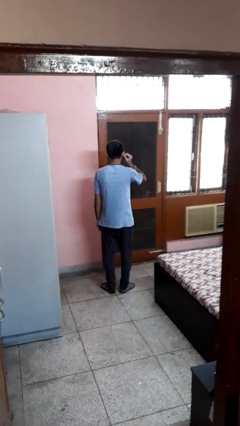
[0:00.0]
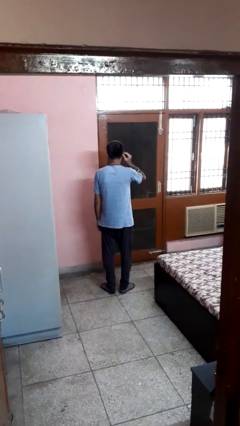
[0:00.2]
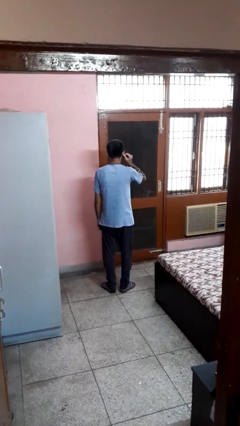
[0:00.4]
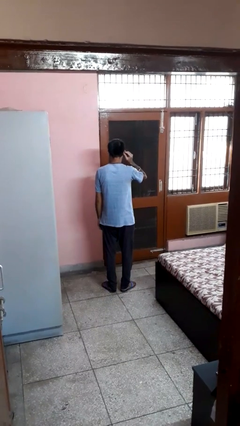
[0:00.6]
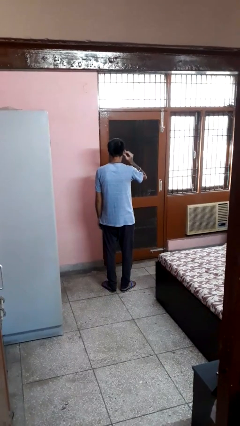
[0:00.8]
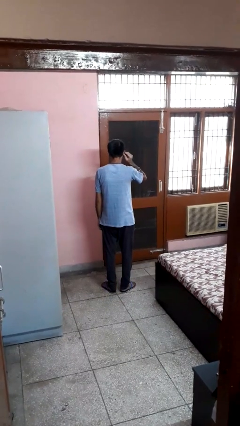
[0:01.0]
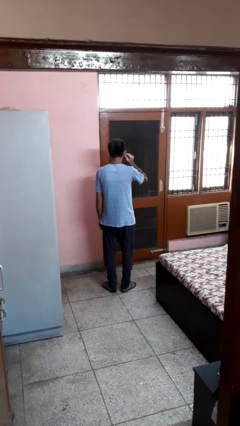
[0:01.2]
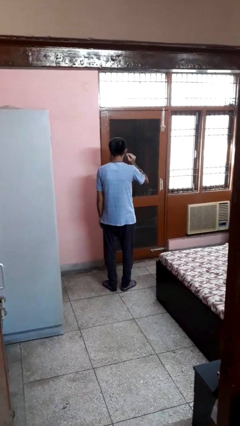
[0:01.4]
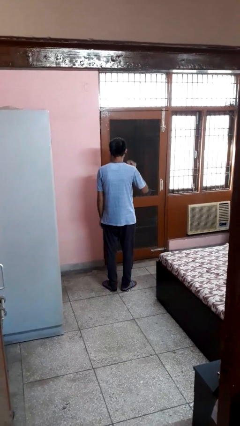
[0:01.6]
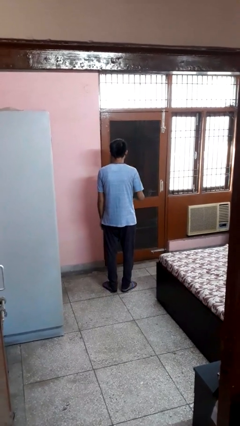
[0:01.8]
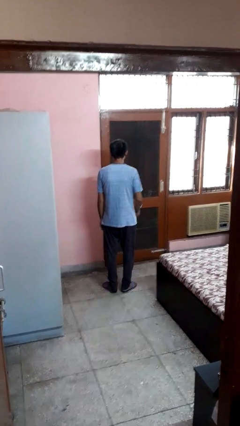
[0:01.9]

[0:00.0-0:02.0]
person touches earlobe

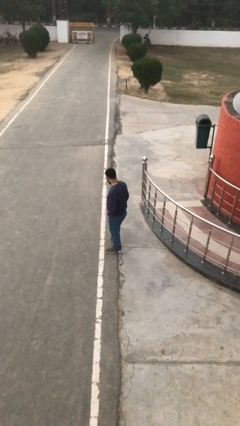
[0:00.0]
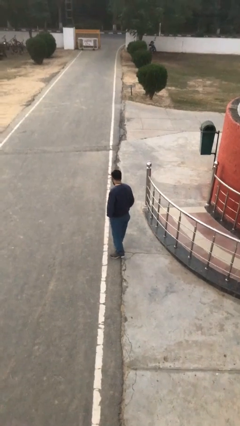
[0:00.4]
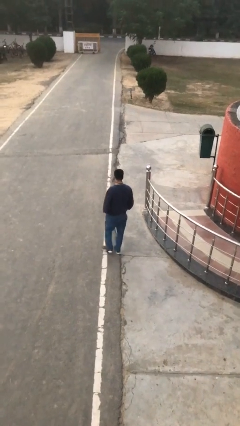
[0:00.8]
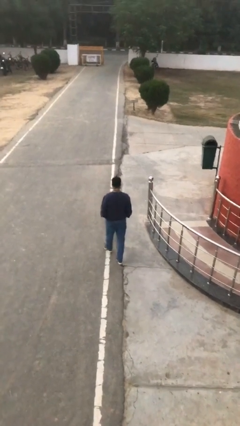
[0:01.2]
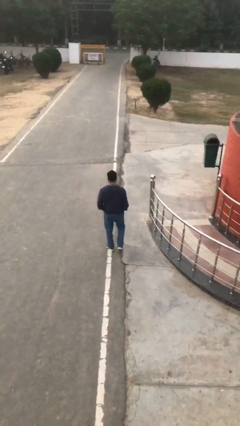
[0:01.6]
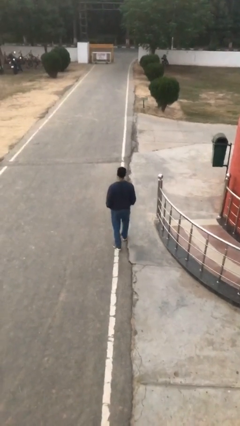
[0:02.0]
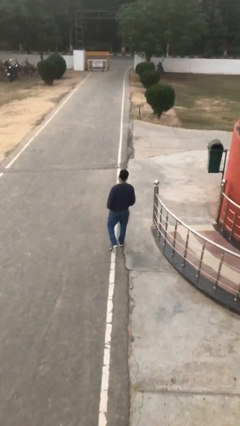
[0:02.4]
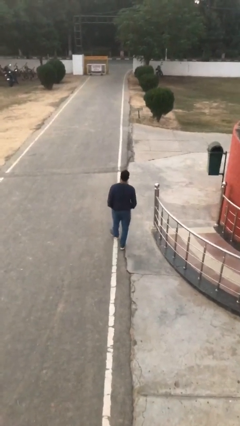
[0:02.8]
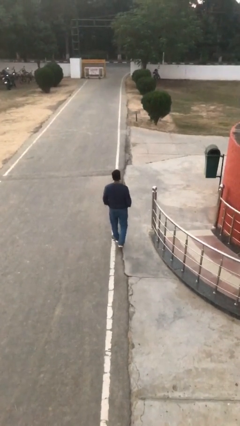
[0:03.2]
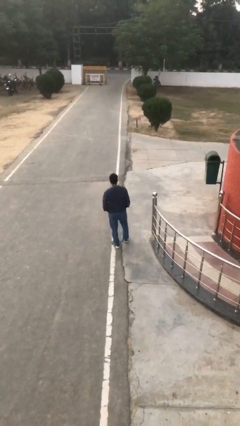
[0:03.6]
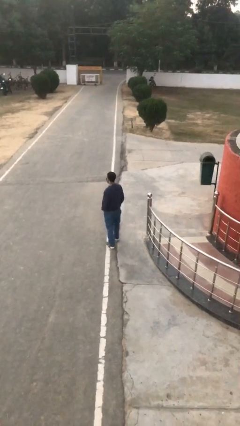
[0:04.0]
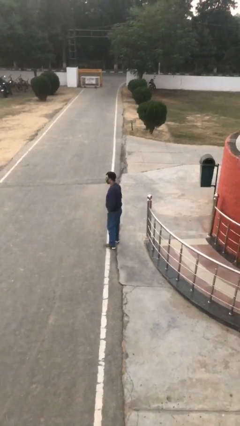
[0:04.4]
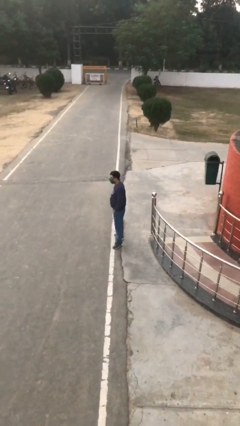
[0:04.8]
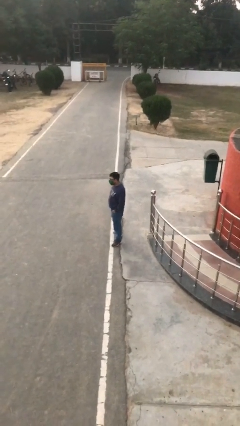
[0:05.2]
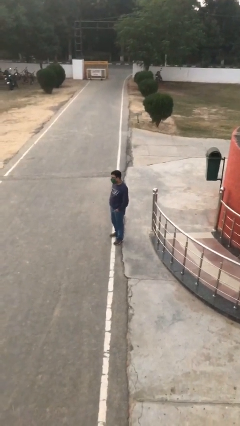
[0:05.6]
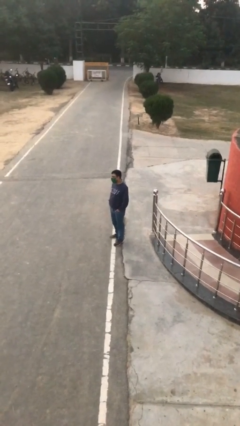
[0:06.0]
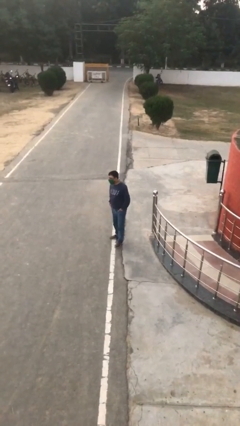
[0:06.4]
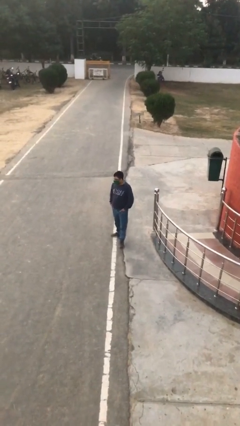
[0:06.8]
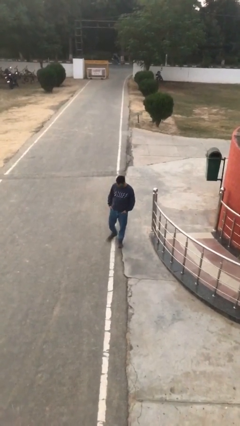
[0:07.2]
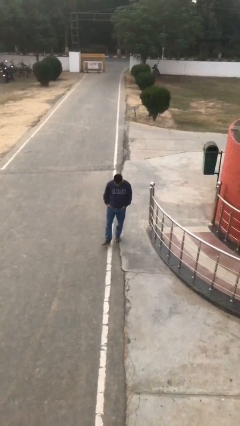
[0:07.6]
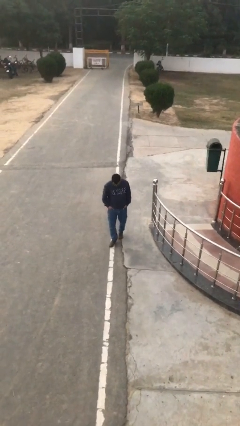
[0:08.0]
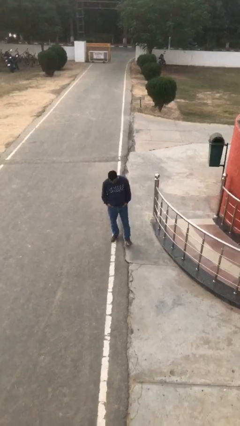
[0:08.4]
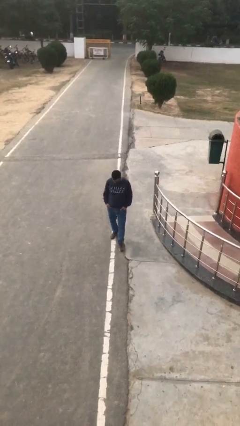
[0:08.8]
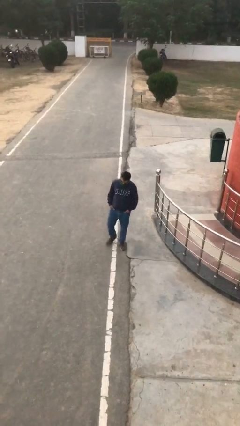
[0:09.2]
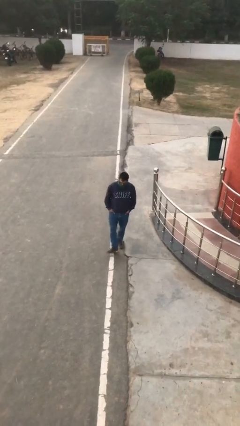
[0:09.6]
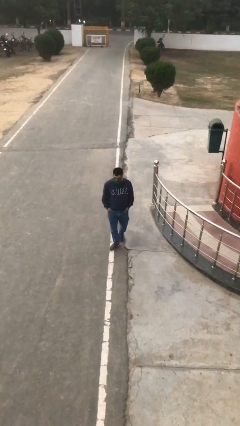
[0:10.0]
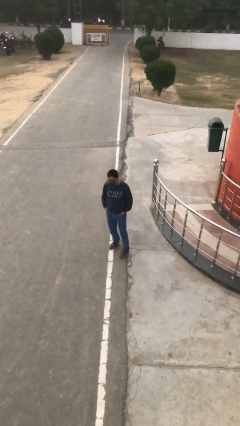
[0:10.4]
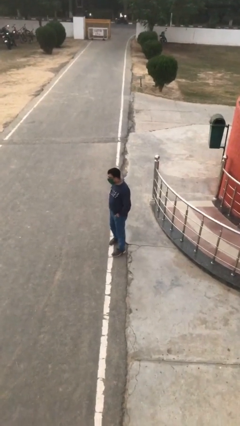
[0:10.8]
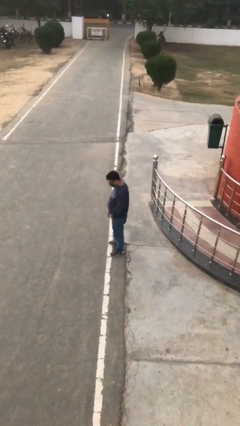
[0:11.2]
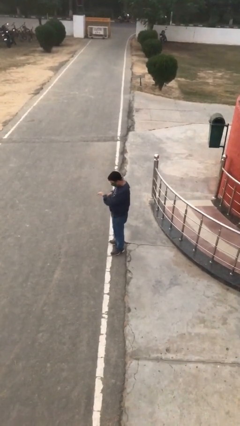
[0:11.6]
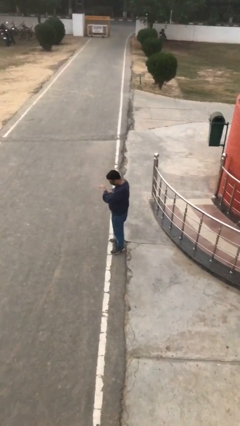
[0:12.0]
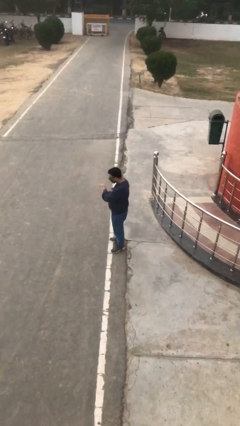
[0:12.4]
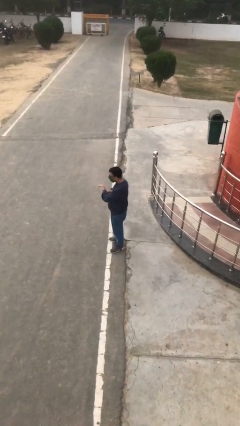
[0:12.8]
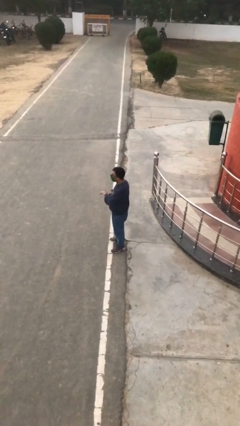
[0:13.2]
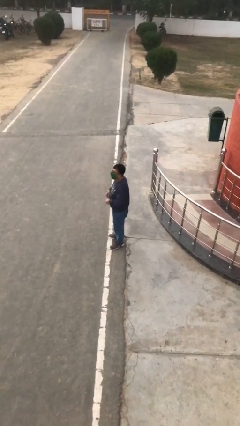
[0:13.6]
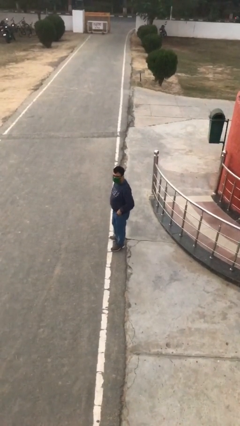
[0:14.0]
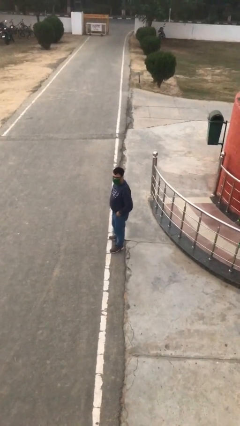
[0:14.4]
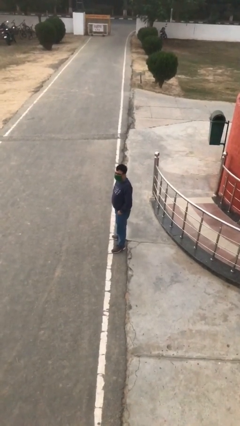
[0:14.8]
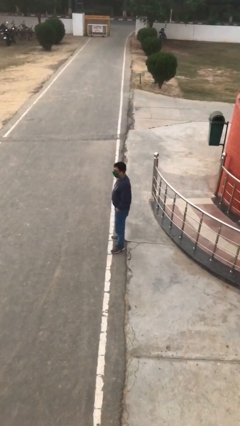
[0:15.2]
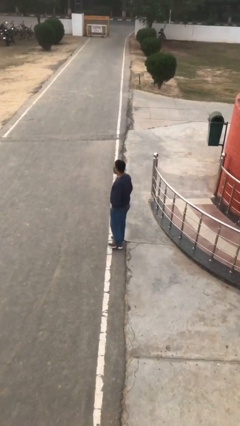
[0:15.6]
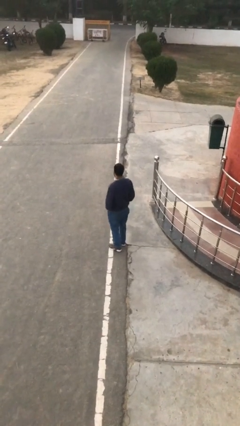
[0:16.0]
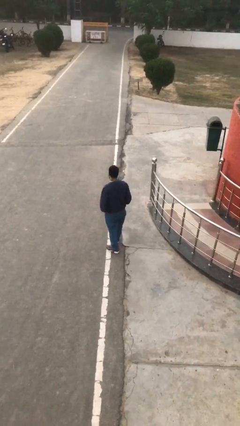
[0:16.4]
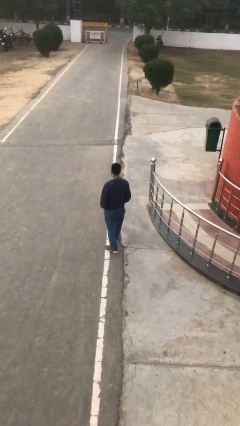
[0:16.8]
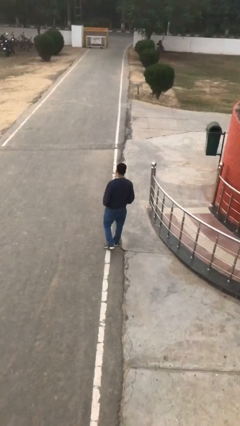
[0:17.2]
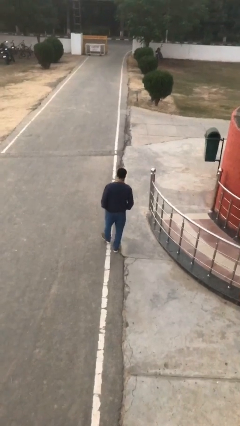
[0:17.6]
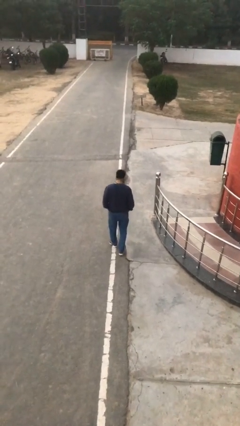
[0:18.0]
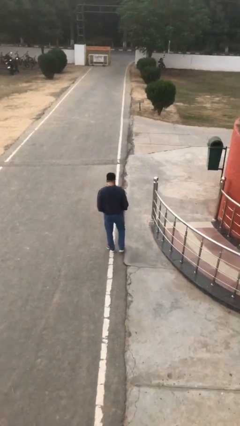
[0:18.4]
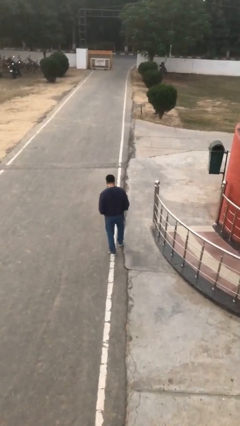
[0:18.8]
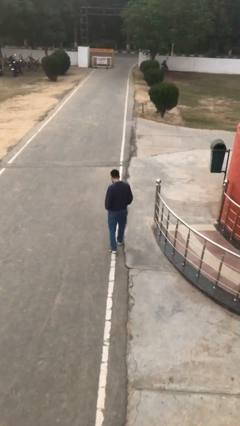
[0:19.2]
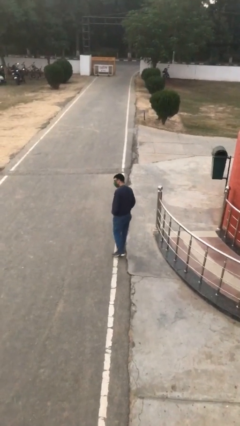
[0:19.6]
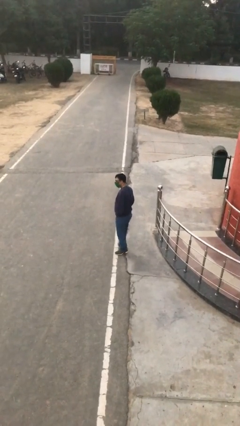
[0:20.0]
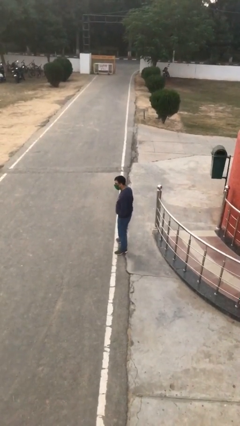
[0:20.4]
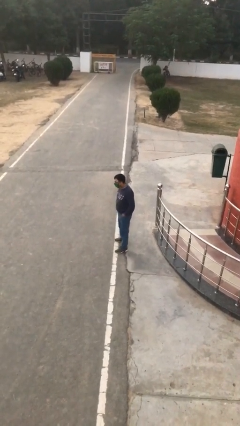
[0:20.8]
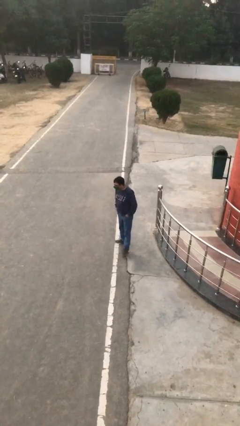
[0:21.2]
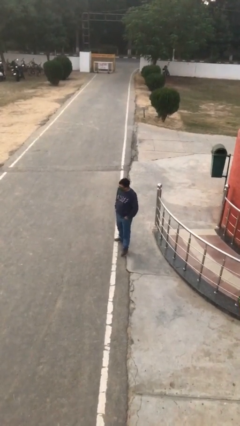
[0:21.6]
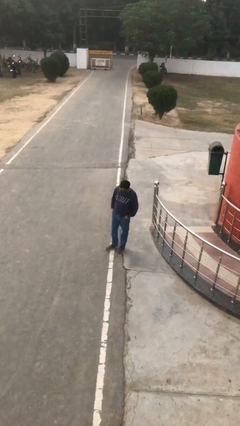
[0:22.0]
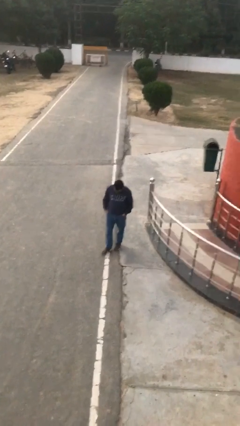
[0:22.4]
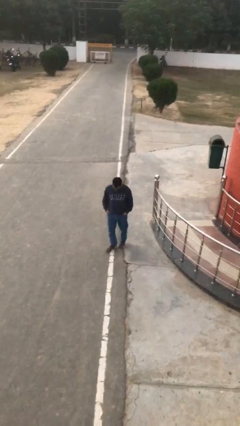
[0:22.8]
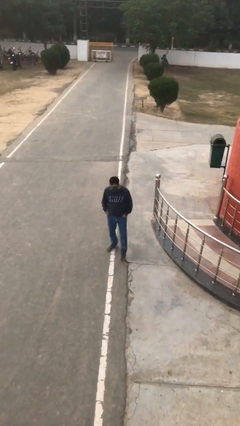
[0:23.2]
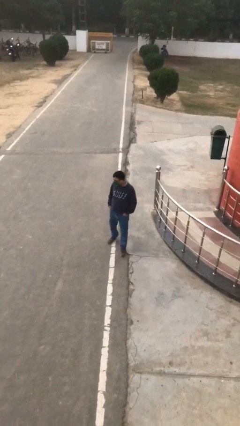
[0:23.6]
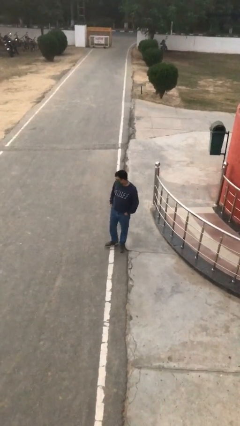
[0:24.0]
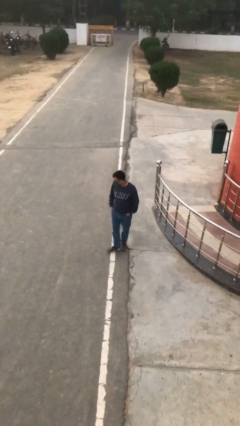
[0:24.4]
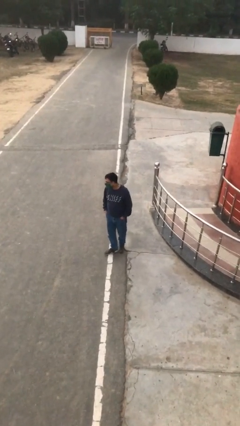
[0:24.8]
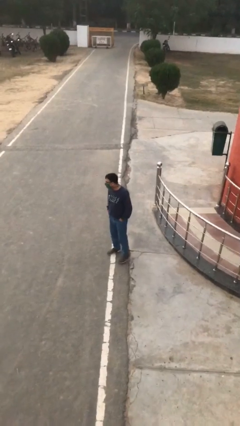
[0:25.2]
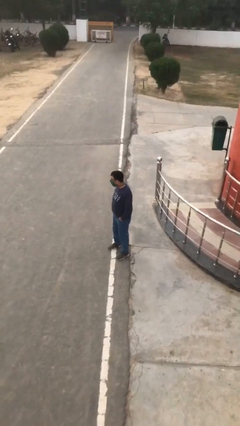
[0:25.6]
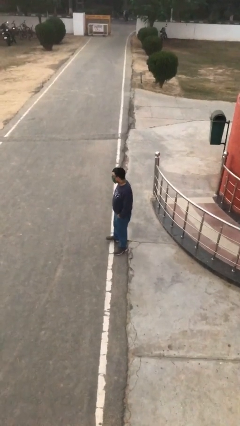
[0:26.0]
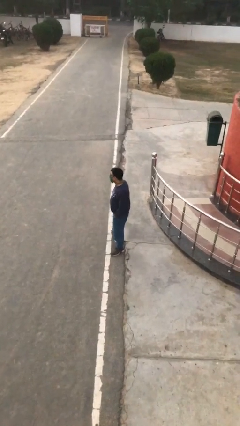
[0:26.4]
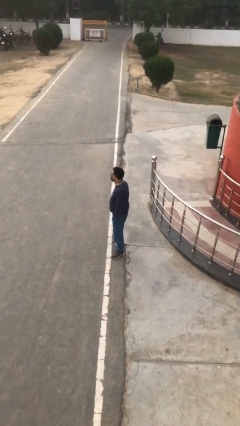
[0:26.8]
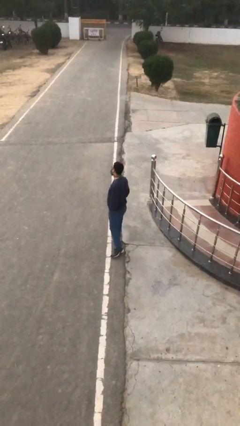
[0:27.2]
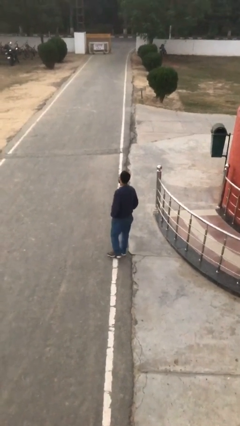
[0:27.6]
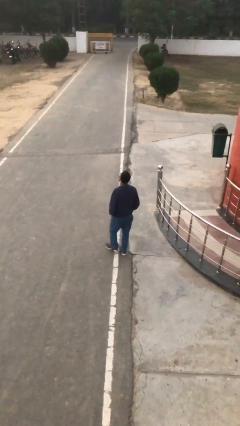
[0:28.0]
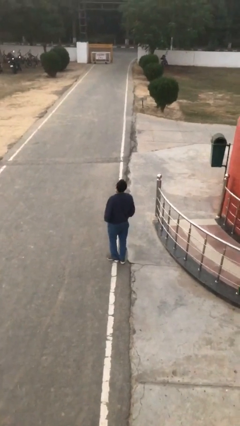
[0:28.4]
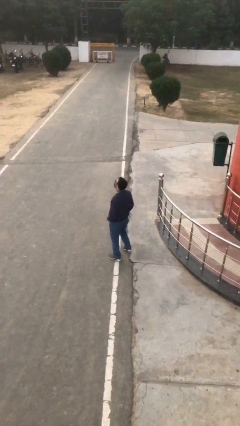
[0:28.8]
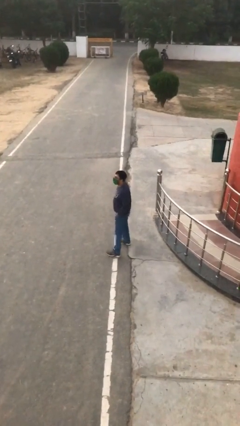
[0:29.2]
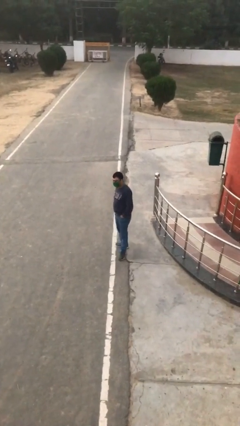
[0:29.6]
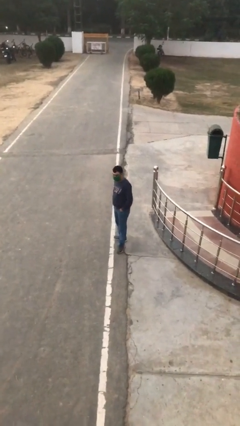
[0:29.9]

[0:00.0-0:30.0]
person walks

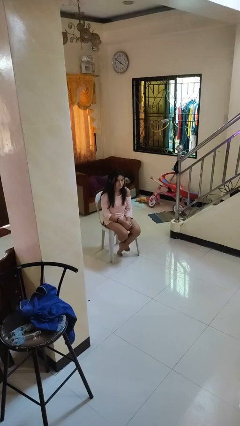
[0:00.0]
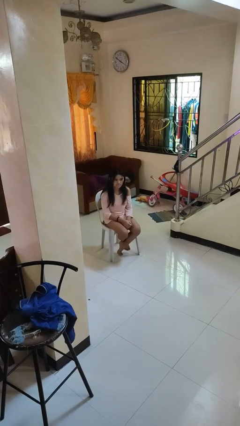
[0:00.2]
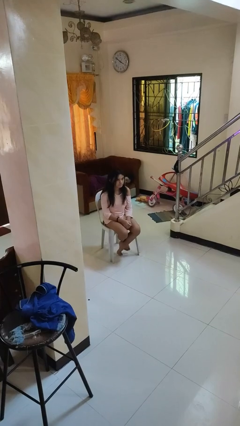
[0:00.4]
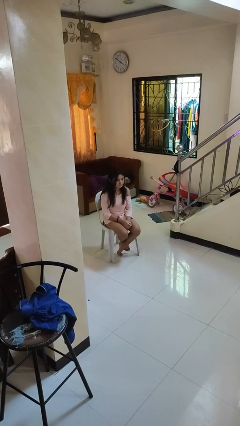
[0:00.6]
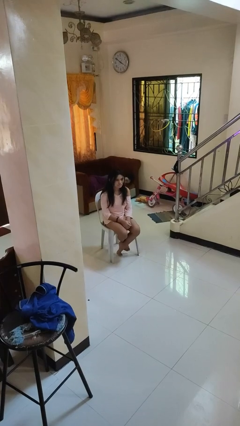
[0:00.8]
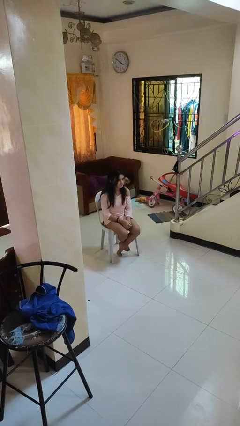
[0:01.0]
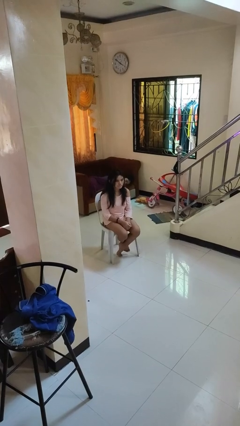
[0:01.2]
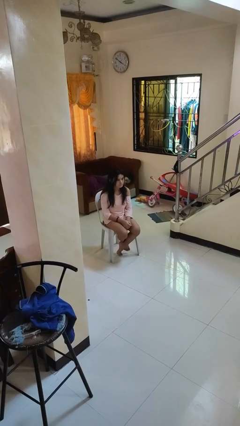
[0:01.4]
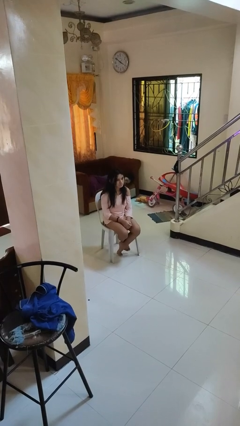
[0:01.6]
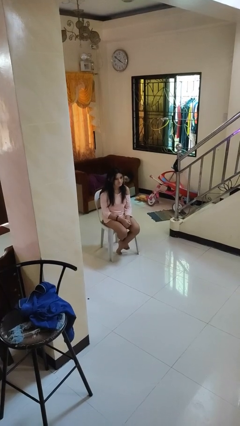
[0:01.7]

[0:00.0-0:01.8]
person shakes head
